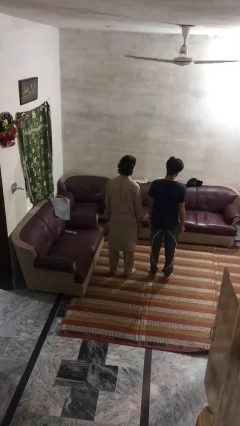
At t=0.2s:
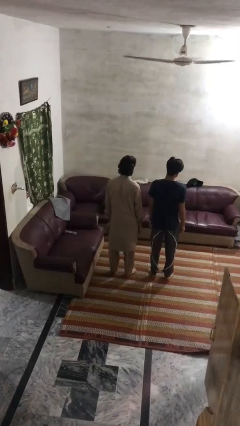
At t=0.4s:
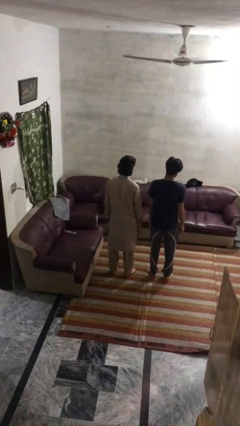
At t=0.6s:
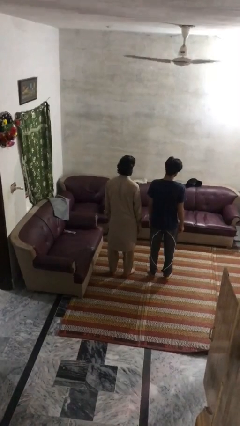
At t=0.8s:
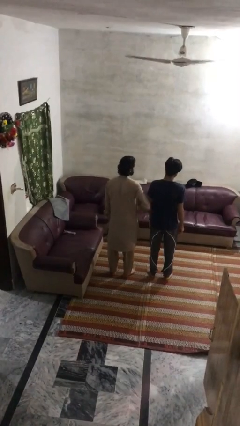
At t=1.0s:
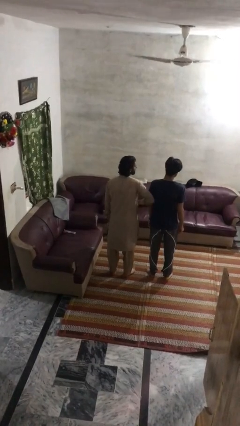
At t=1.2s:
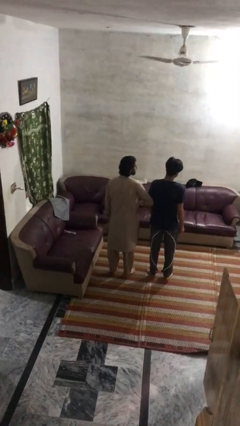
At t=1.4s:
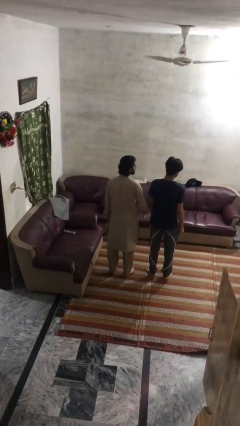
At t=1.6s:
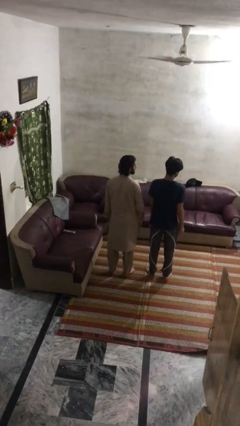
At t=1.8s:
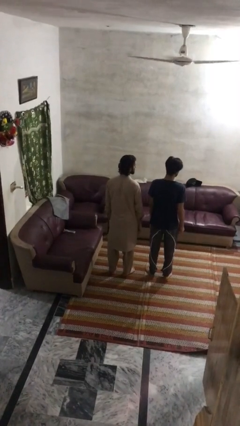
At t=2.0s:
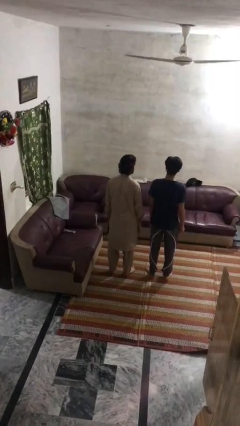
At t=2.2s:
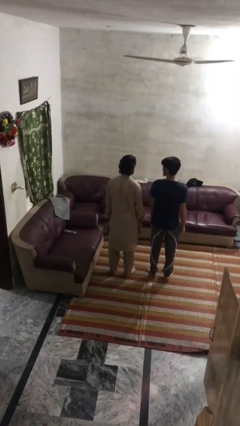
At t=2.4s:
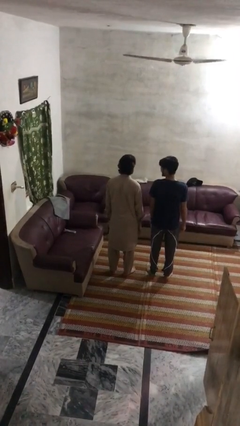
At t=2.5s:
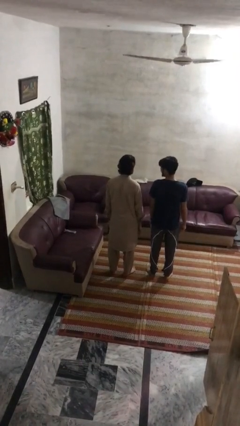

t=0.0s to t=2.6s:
person nudges person with elbow

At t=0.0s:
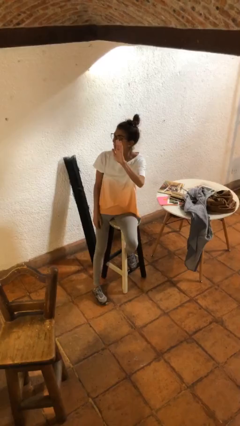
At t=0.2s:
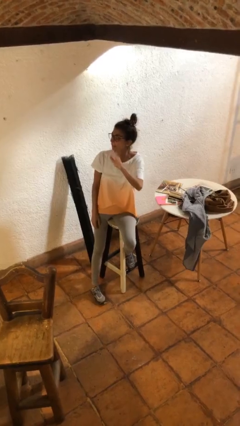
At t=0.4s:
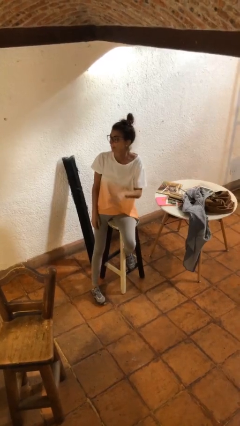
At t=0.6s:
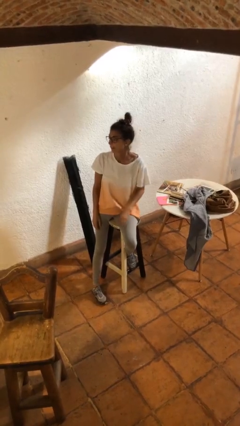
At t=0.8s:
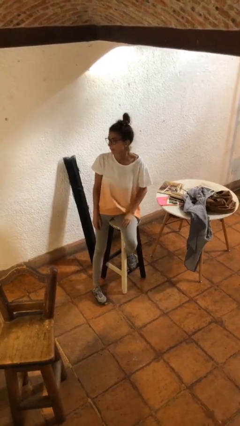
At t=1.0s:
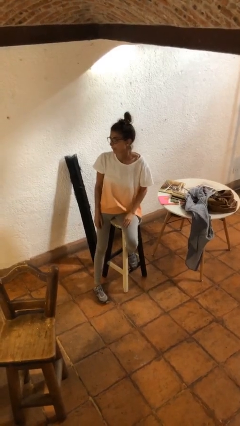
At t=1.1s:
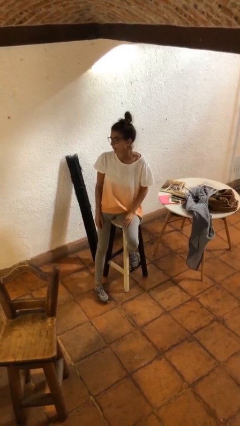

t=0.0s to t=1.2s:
person gestures lower hand
